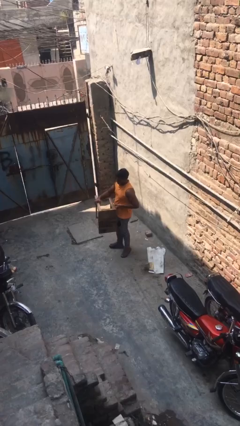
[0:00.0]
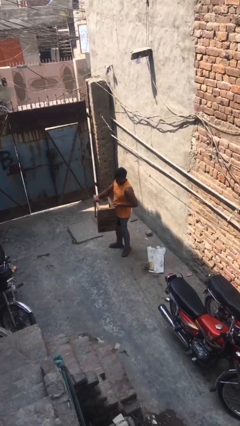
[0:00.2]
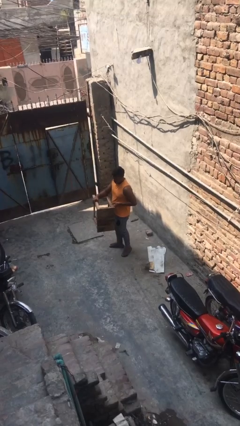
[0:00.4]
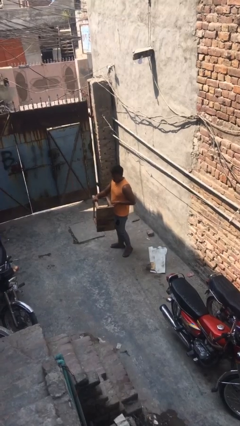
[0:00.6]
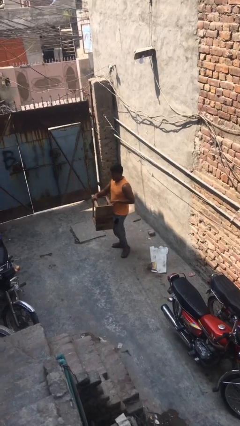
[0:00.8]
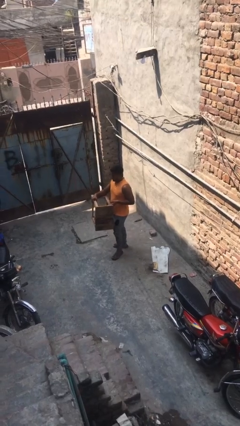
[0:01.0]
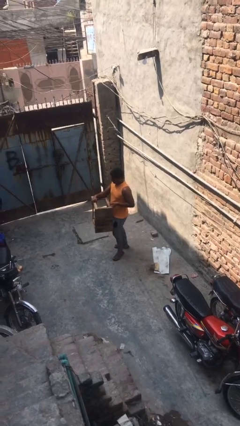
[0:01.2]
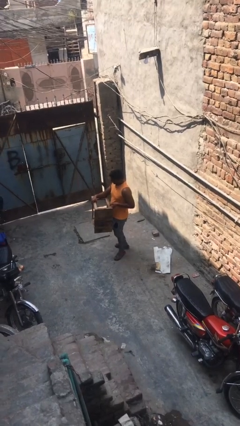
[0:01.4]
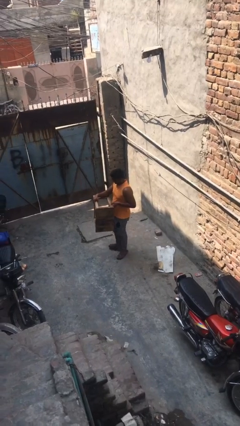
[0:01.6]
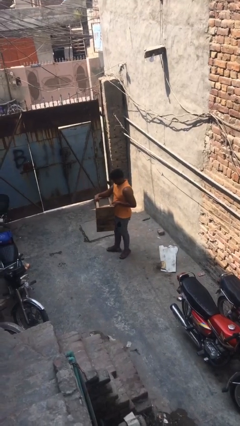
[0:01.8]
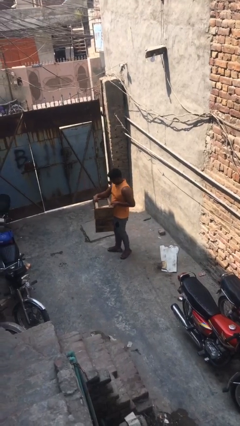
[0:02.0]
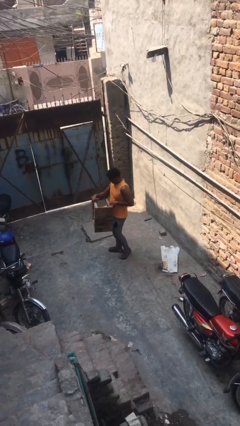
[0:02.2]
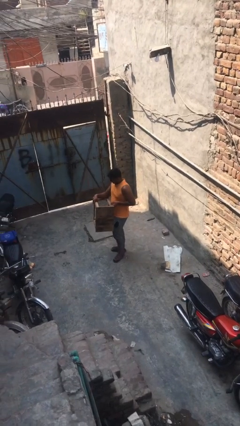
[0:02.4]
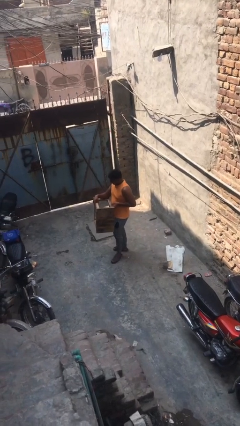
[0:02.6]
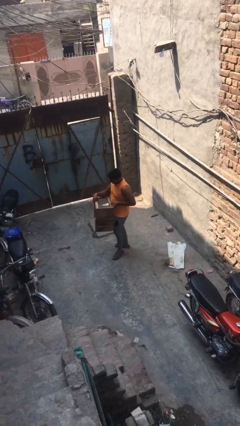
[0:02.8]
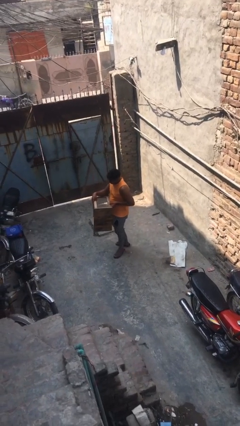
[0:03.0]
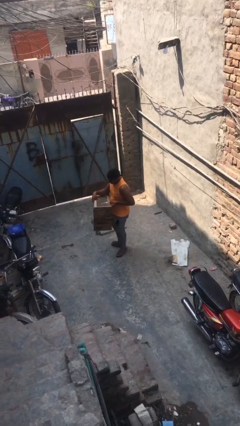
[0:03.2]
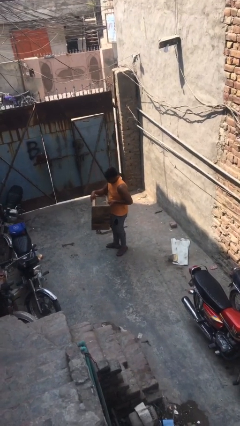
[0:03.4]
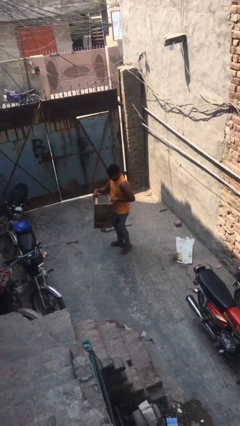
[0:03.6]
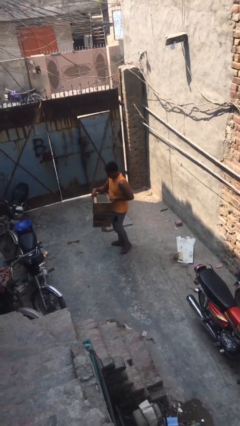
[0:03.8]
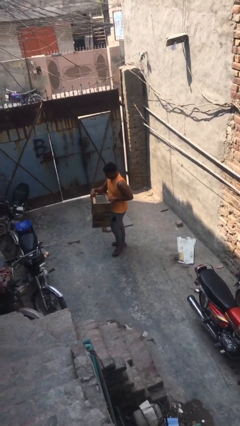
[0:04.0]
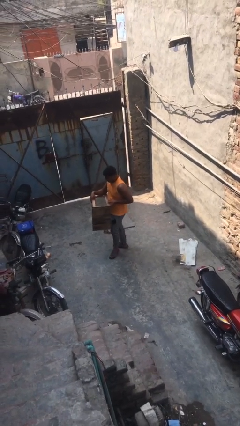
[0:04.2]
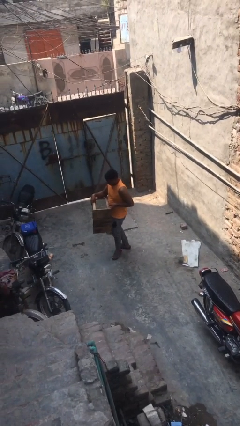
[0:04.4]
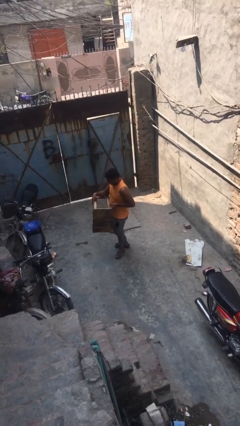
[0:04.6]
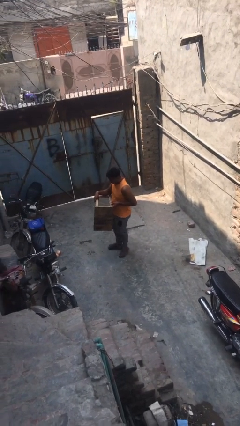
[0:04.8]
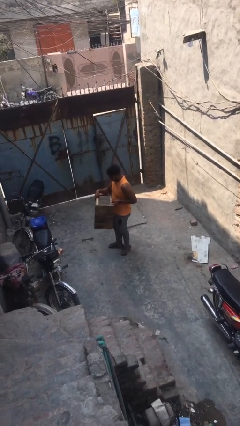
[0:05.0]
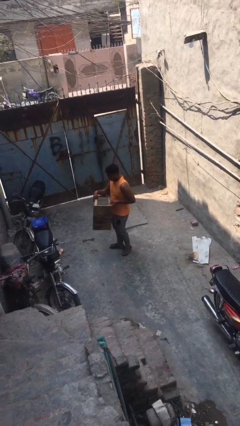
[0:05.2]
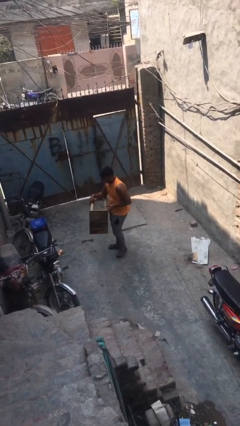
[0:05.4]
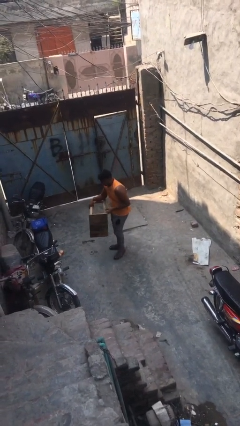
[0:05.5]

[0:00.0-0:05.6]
person carries heavy object

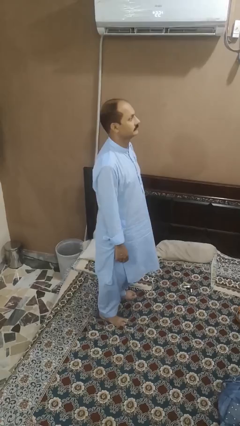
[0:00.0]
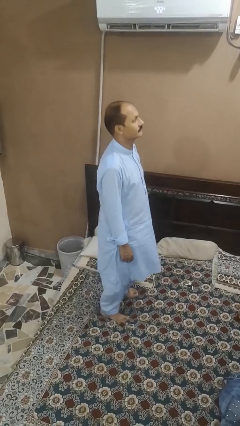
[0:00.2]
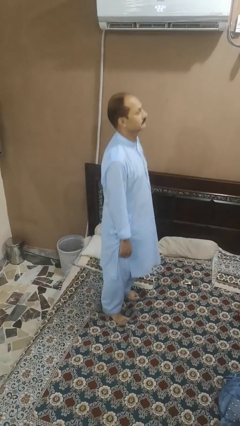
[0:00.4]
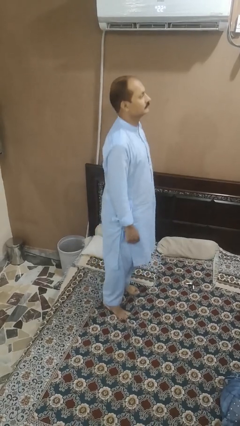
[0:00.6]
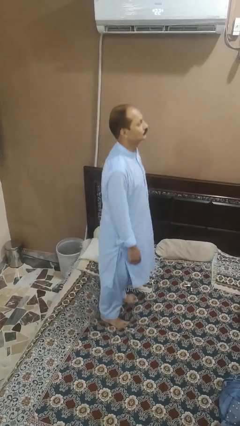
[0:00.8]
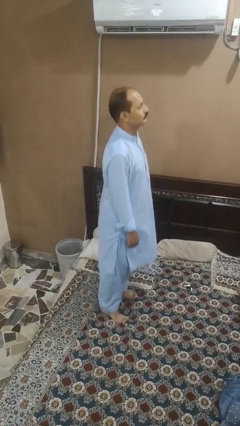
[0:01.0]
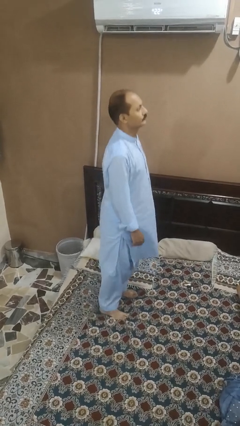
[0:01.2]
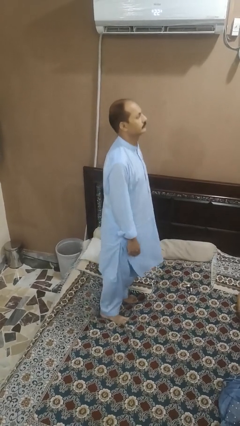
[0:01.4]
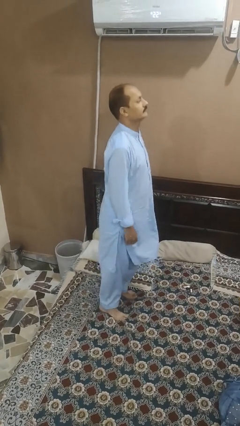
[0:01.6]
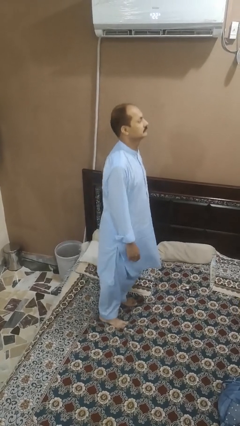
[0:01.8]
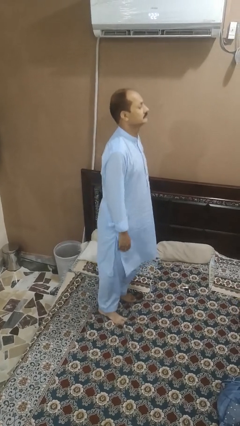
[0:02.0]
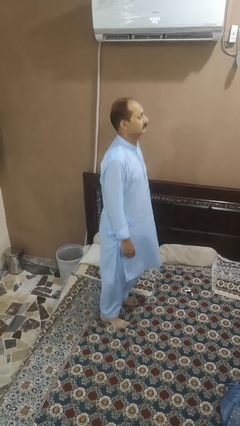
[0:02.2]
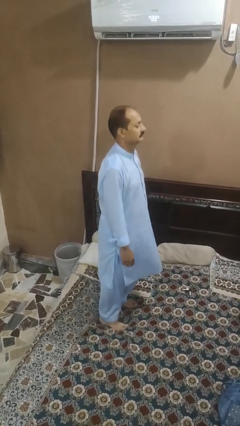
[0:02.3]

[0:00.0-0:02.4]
person jumps on bed

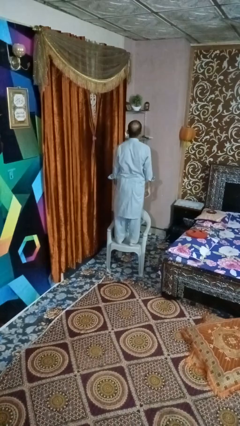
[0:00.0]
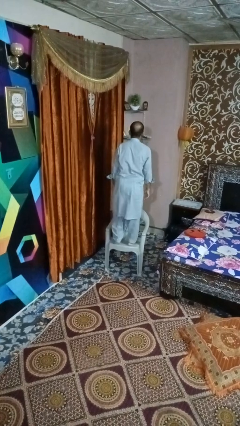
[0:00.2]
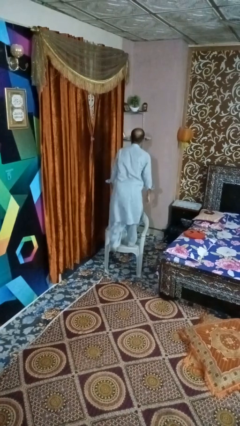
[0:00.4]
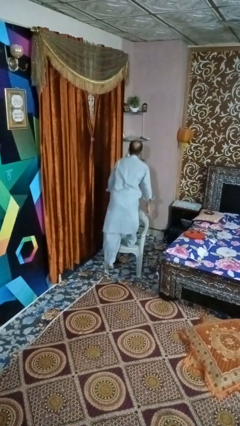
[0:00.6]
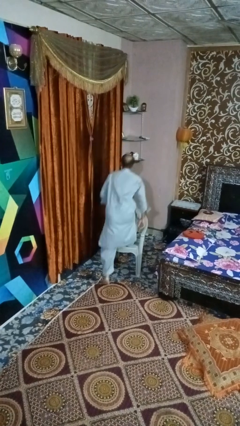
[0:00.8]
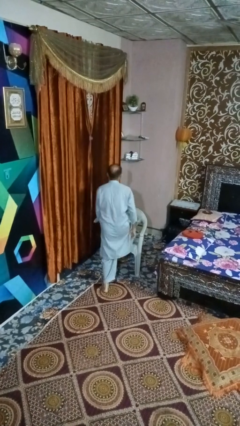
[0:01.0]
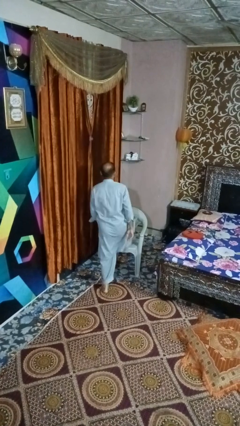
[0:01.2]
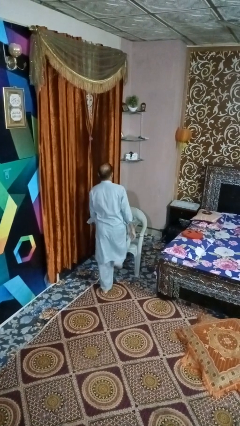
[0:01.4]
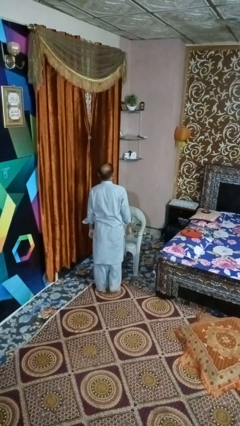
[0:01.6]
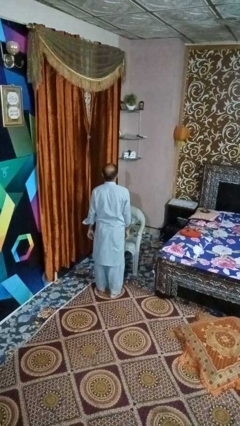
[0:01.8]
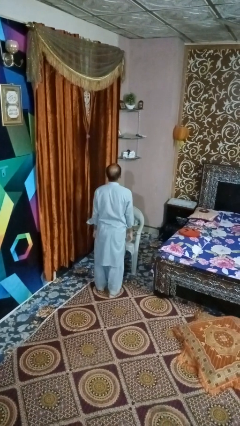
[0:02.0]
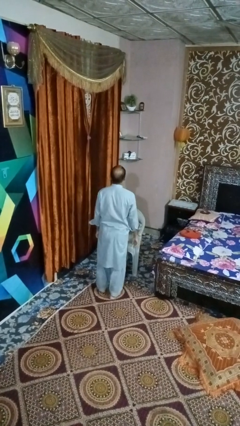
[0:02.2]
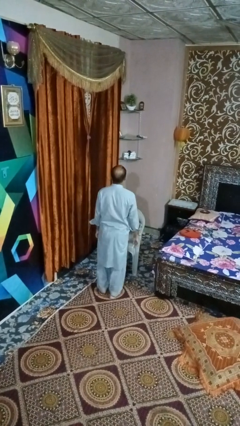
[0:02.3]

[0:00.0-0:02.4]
person climbs off chair

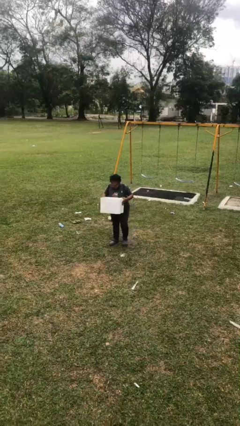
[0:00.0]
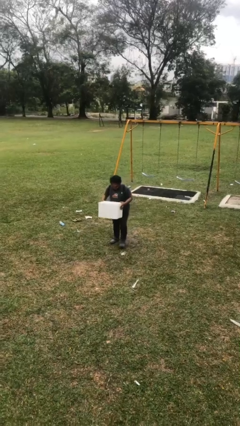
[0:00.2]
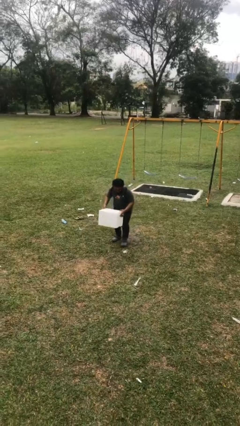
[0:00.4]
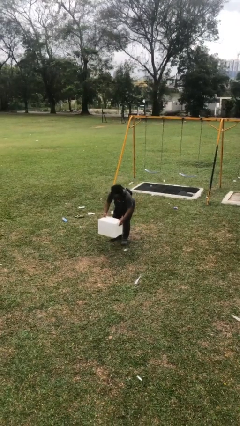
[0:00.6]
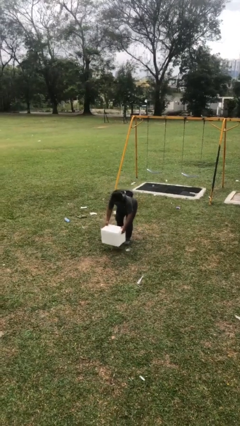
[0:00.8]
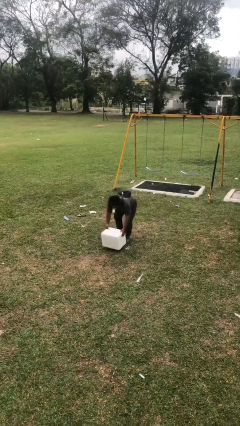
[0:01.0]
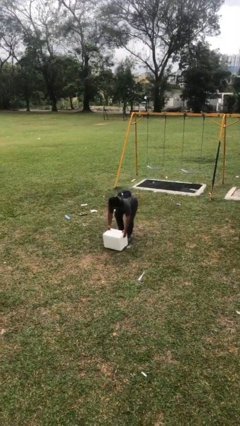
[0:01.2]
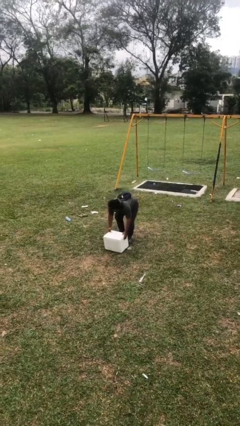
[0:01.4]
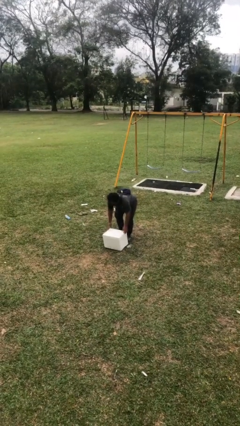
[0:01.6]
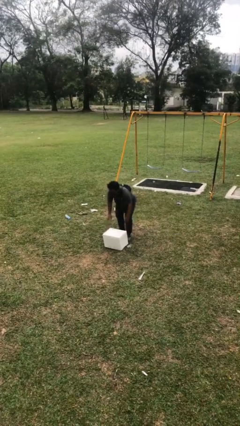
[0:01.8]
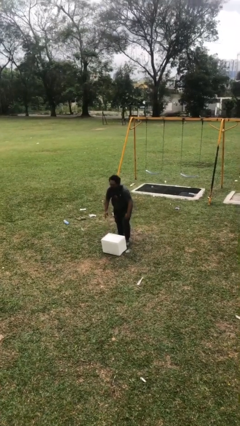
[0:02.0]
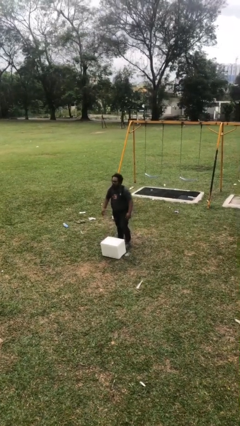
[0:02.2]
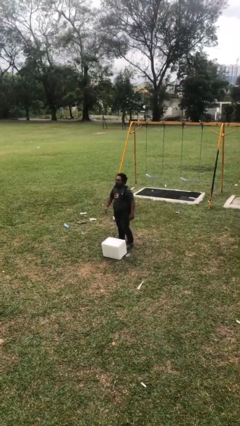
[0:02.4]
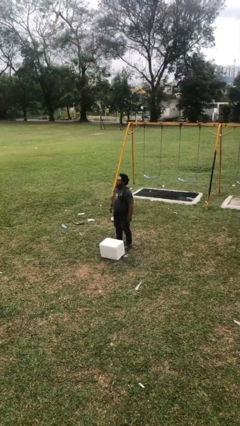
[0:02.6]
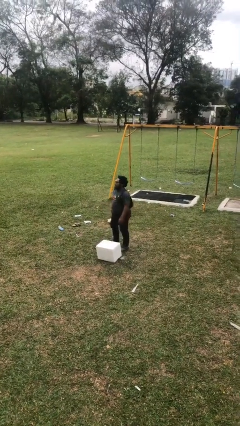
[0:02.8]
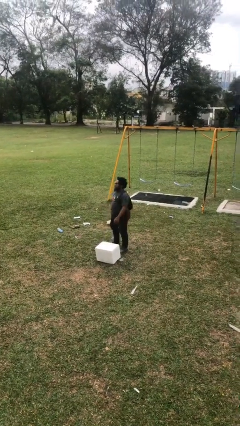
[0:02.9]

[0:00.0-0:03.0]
person puts down object on floor

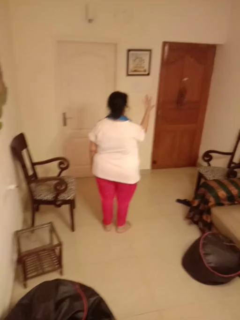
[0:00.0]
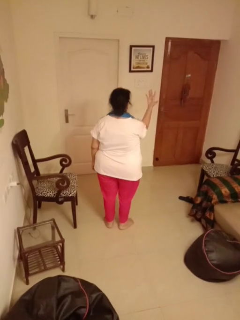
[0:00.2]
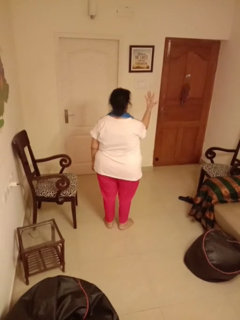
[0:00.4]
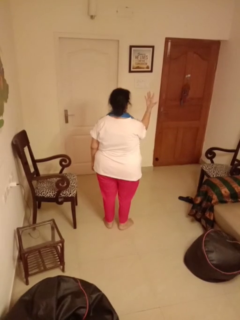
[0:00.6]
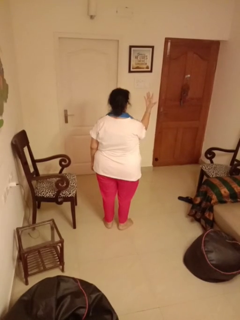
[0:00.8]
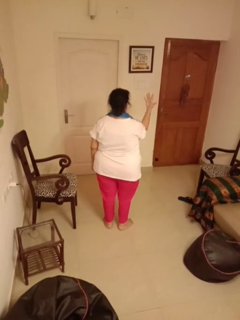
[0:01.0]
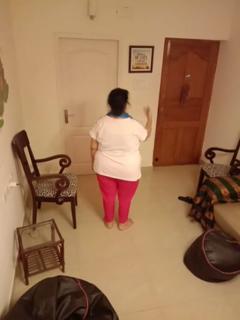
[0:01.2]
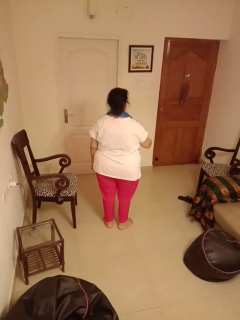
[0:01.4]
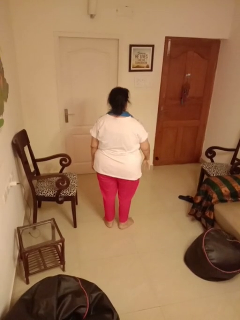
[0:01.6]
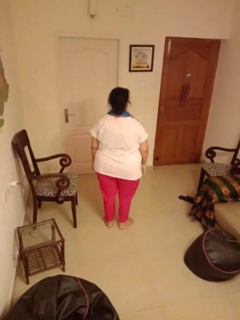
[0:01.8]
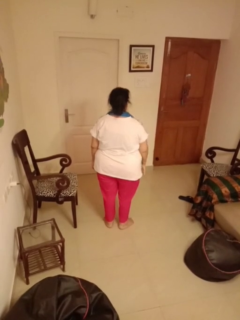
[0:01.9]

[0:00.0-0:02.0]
person gestures number five

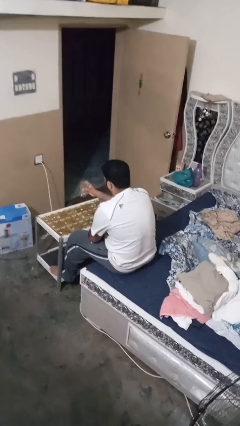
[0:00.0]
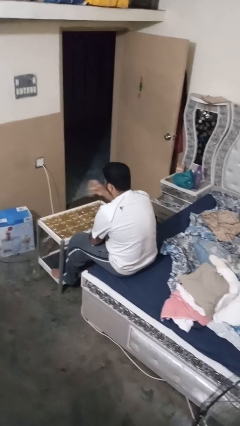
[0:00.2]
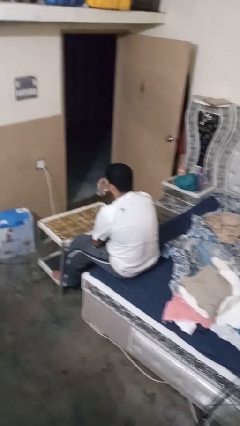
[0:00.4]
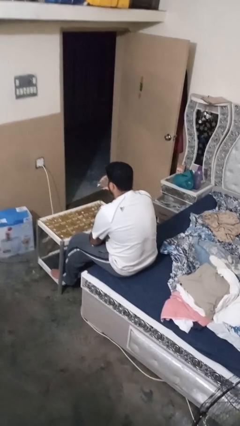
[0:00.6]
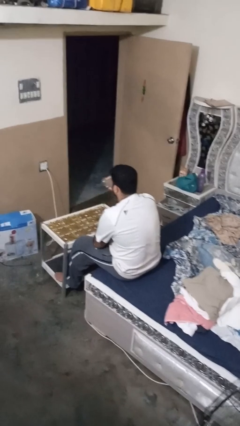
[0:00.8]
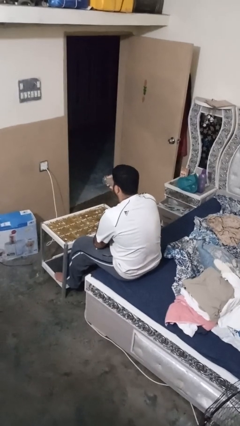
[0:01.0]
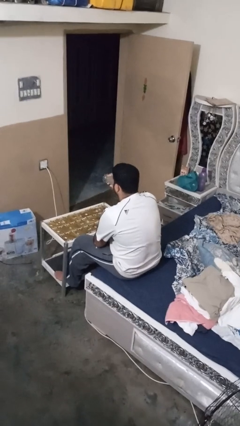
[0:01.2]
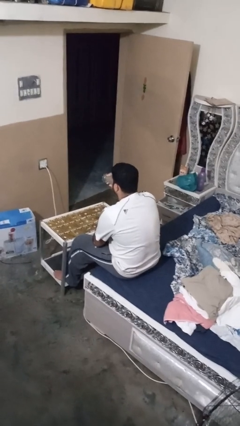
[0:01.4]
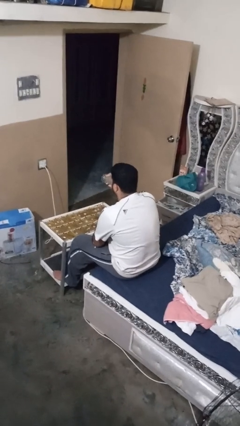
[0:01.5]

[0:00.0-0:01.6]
person drinks from shotglass

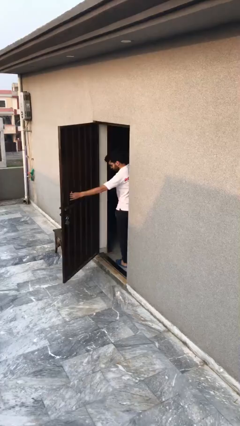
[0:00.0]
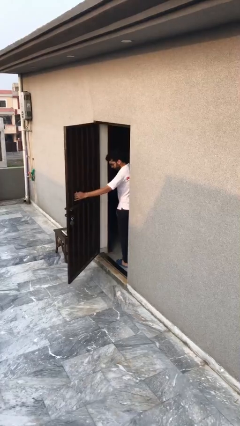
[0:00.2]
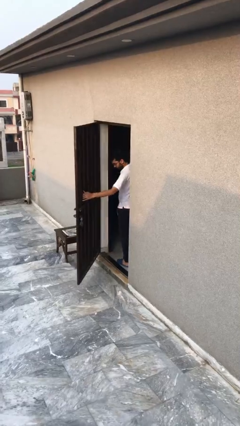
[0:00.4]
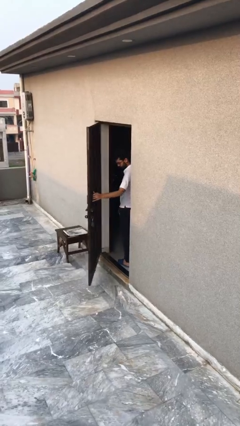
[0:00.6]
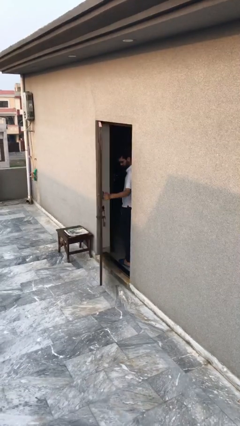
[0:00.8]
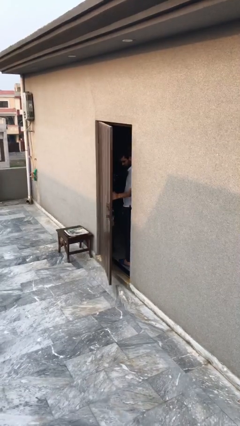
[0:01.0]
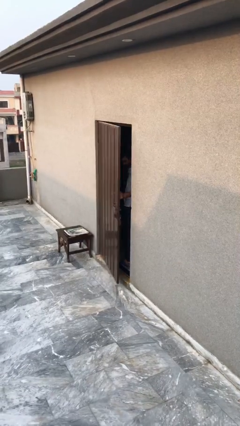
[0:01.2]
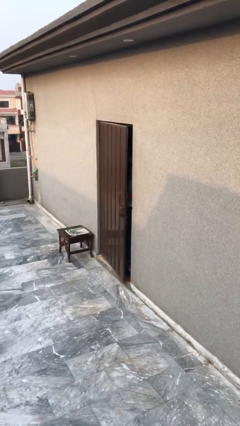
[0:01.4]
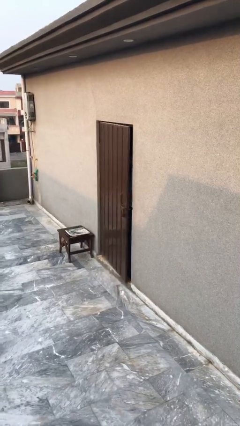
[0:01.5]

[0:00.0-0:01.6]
person closes facility door
